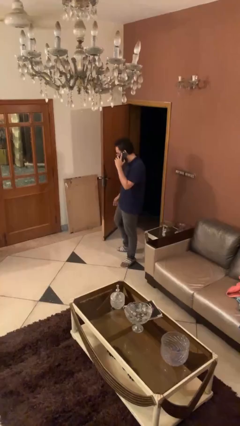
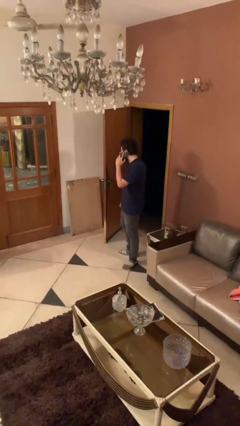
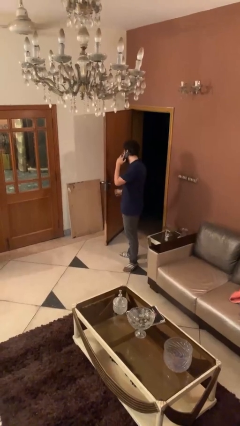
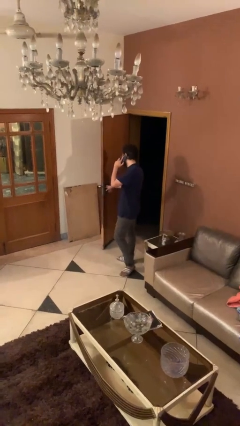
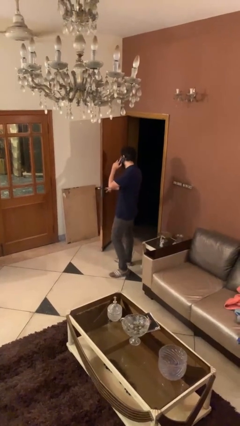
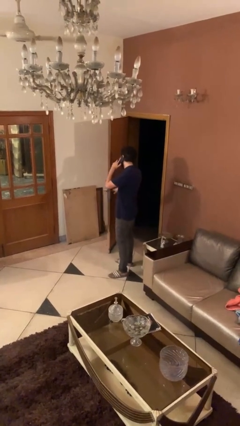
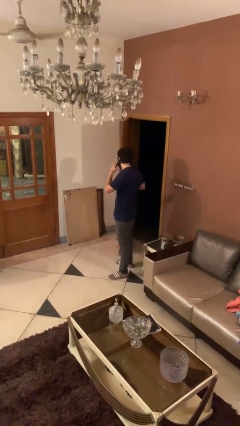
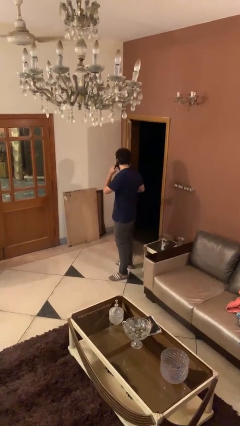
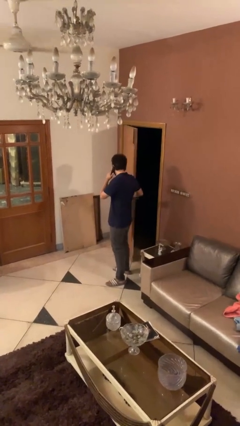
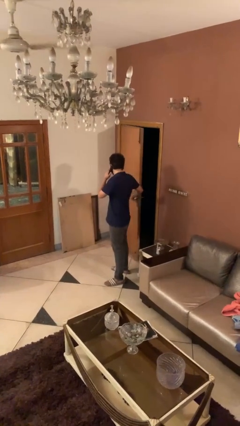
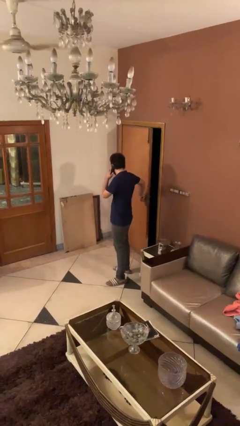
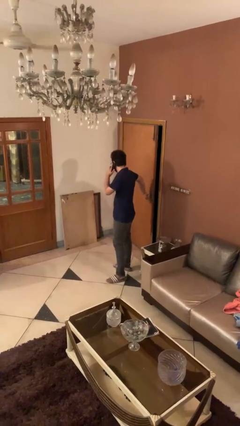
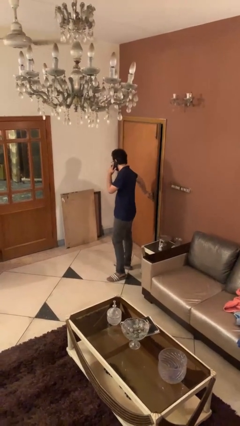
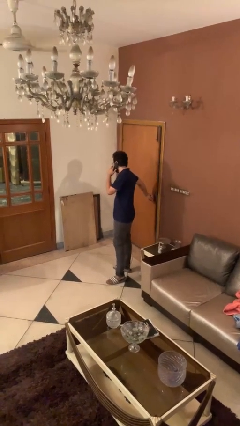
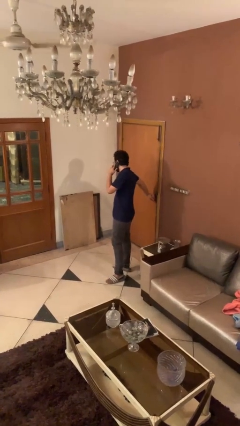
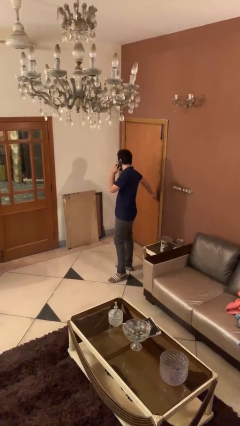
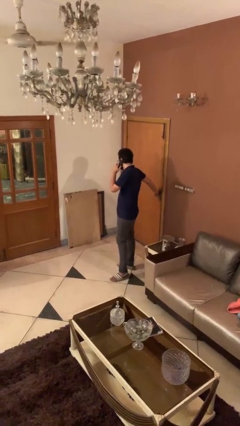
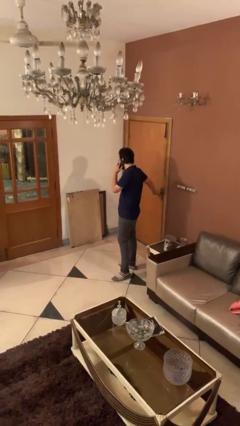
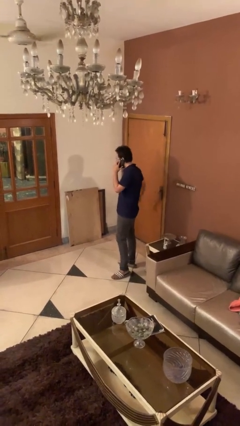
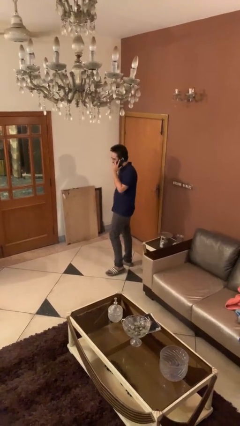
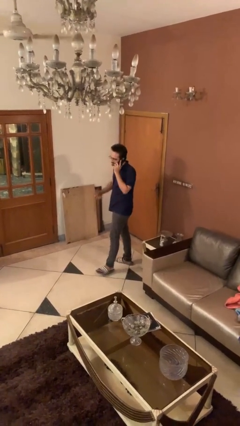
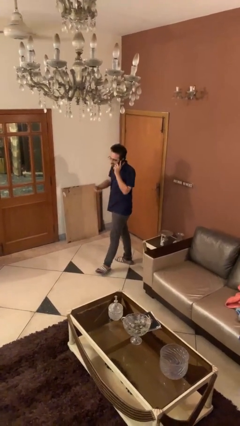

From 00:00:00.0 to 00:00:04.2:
person closes facility door

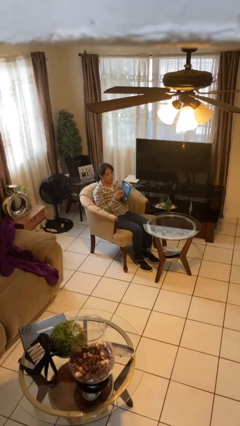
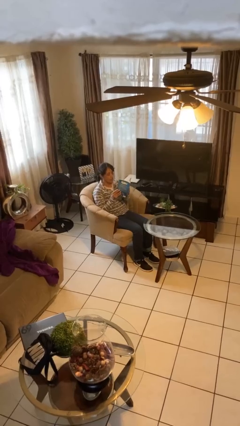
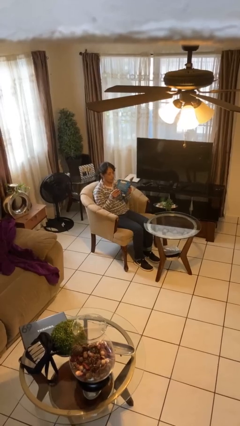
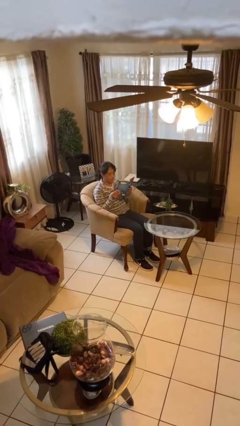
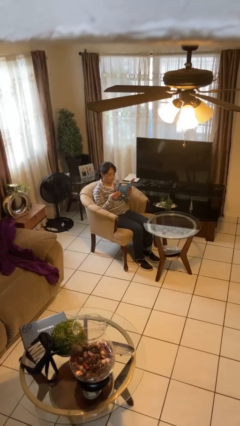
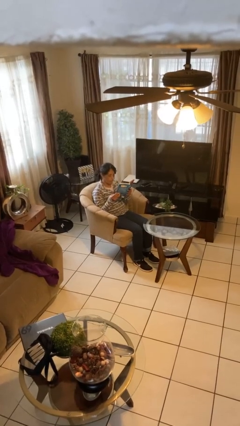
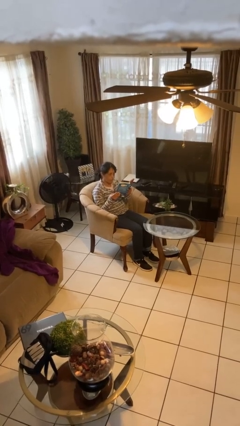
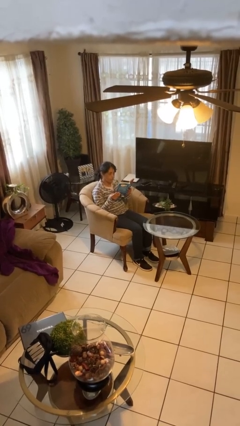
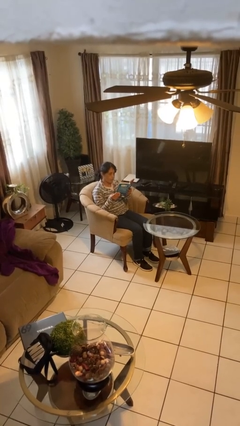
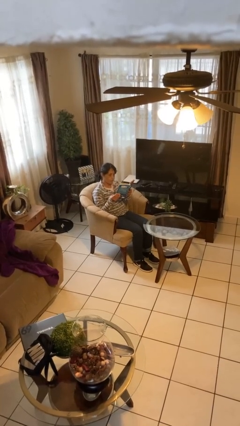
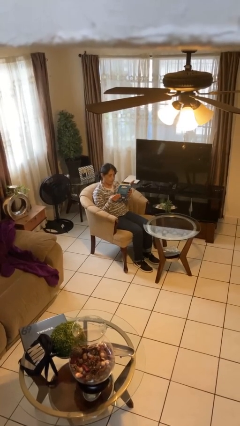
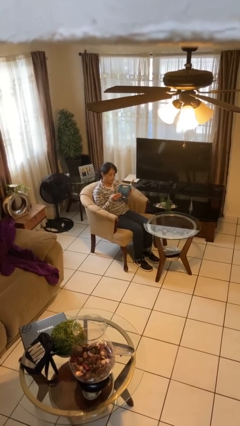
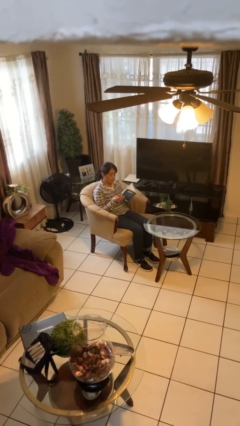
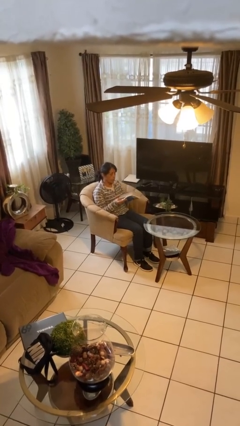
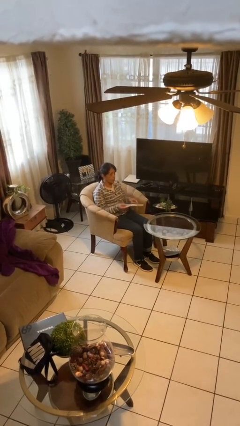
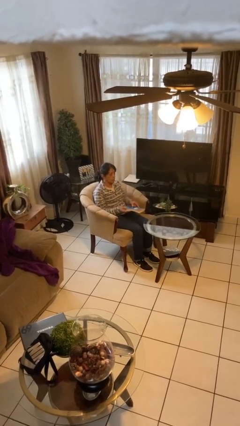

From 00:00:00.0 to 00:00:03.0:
person reads document

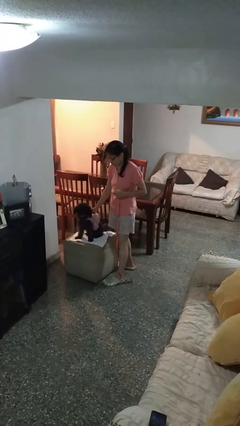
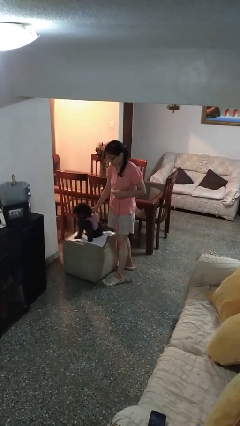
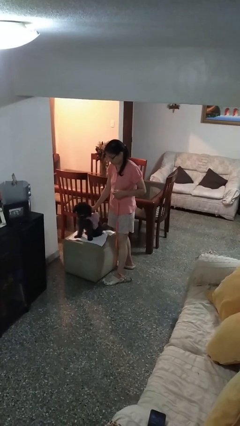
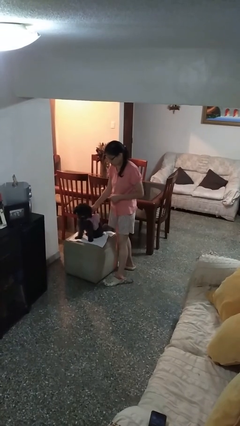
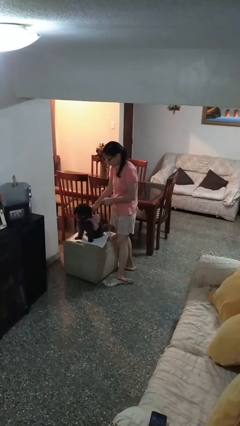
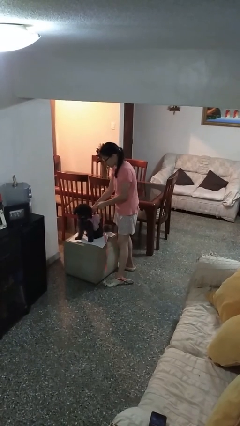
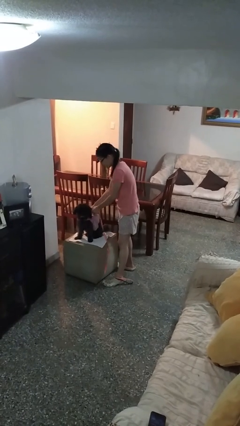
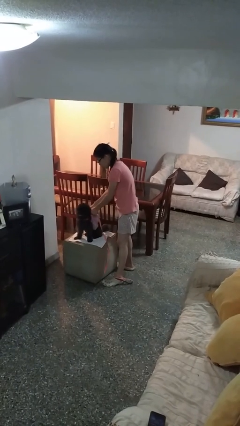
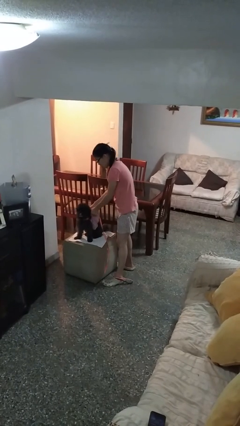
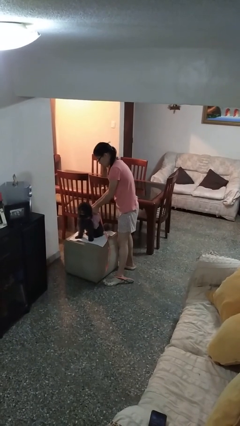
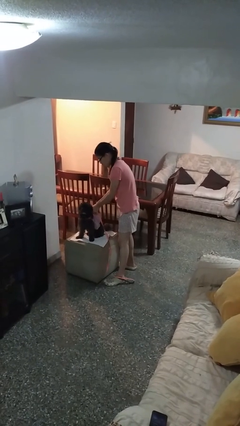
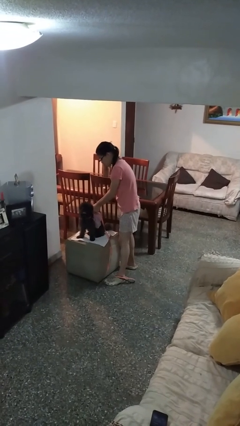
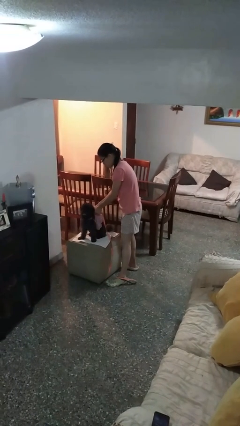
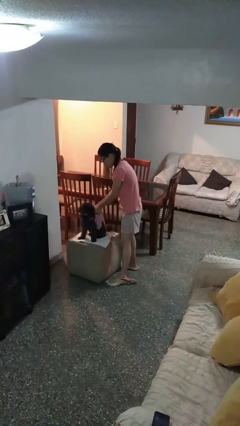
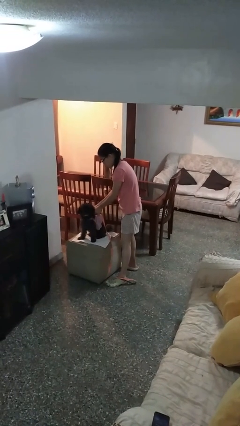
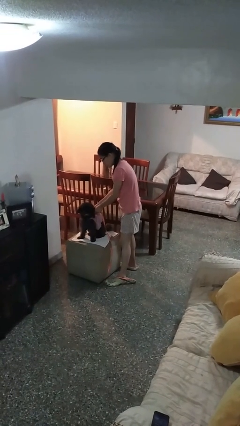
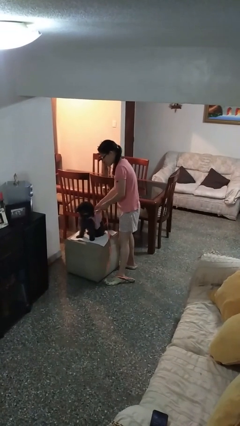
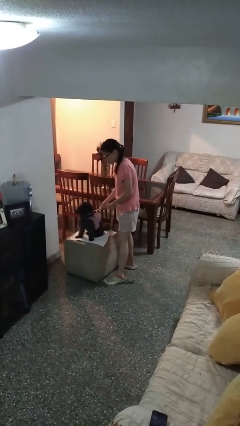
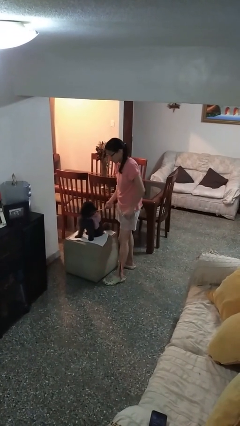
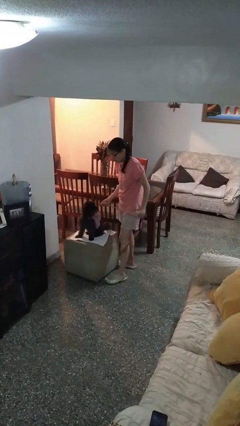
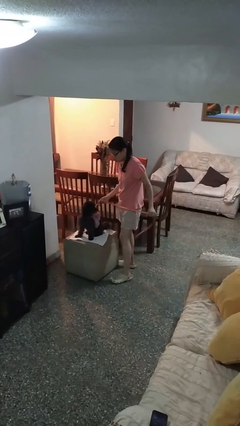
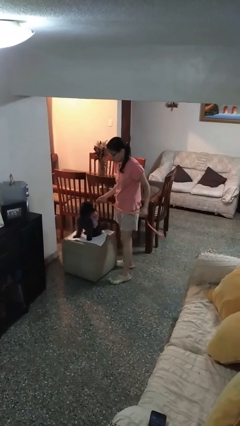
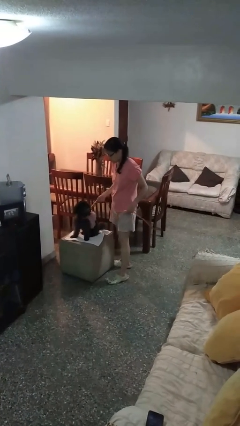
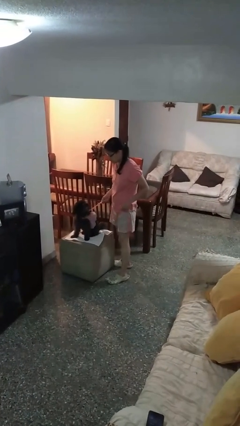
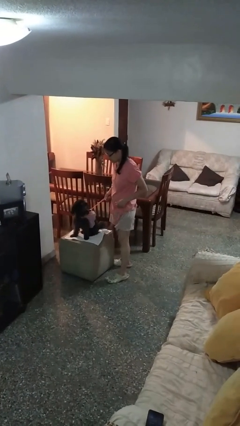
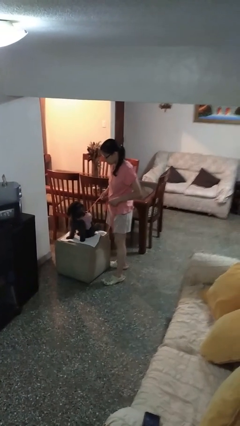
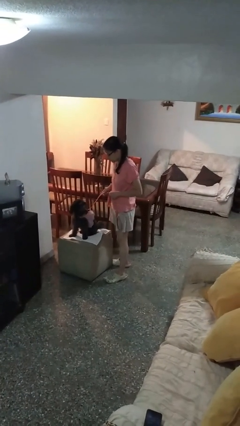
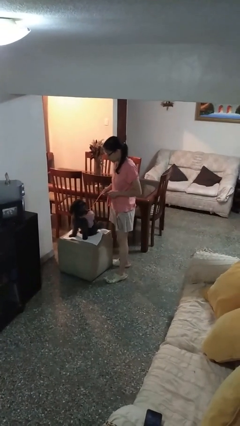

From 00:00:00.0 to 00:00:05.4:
person attaches leash to dog

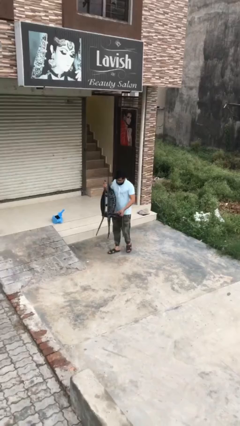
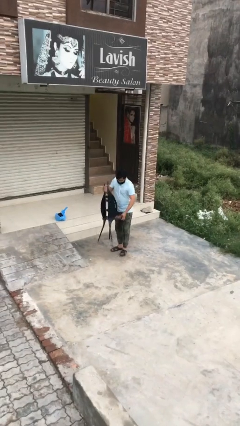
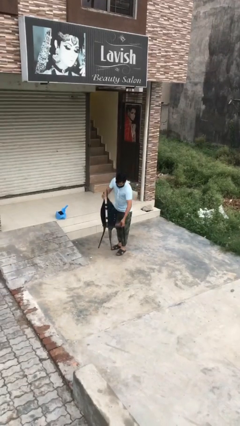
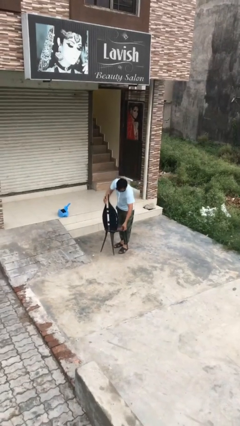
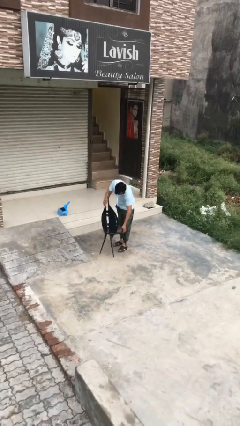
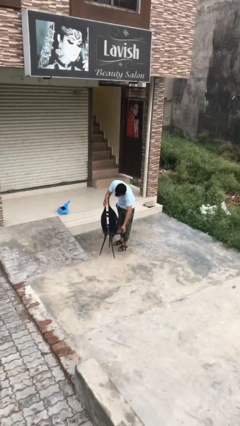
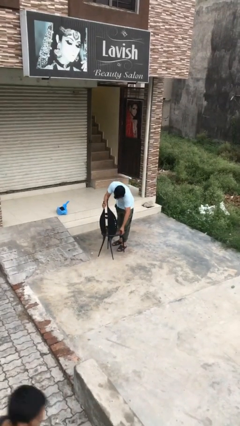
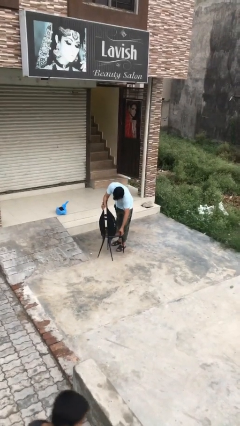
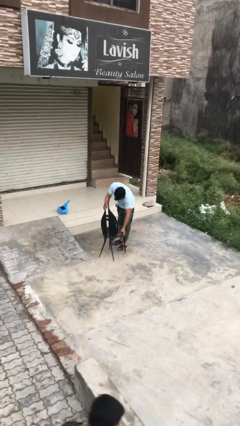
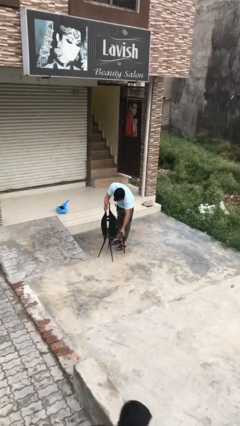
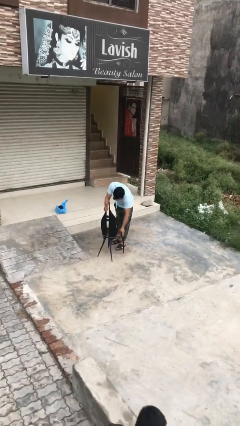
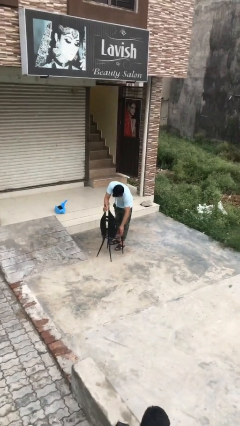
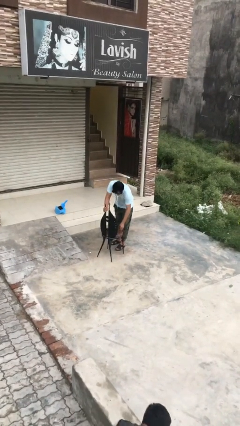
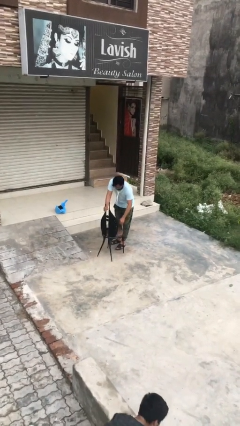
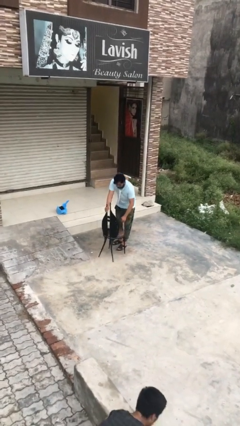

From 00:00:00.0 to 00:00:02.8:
person puts down object on floor

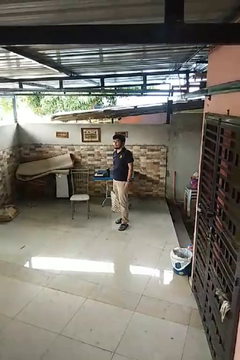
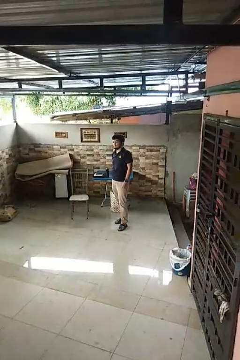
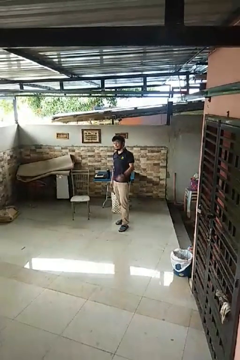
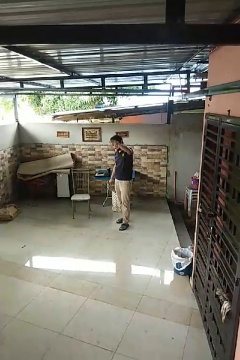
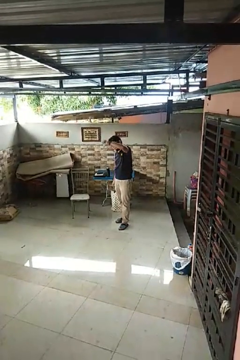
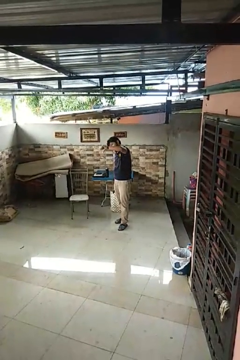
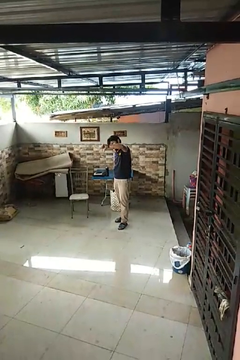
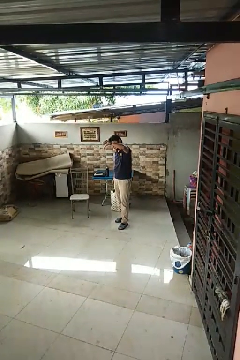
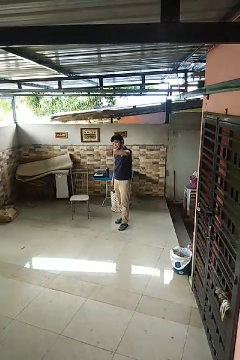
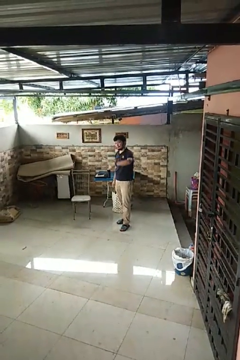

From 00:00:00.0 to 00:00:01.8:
person gestures thumbs down

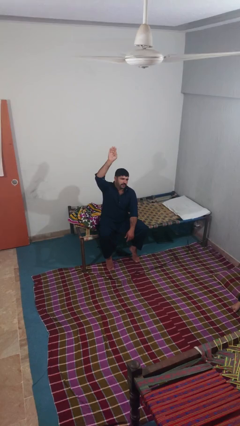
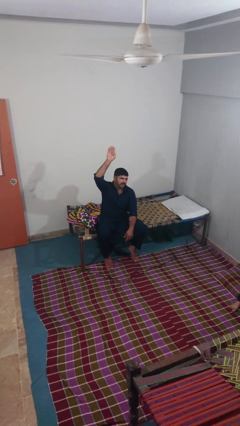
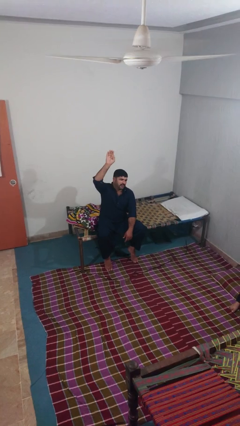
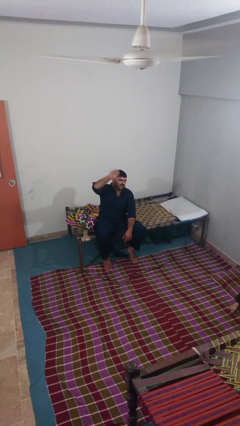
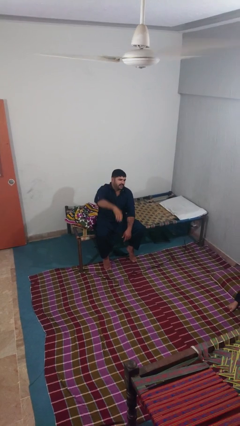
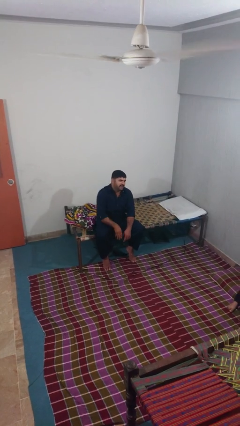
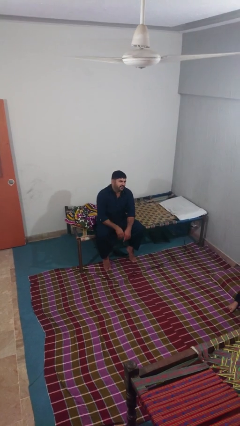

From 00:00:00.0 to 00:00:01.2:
person gestures lower hand
